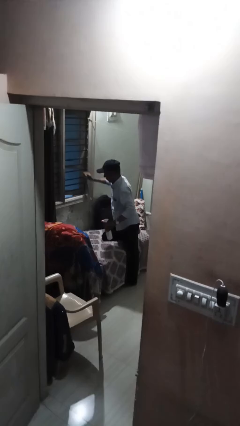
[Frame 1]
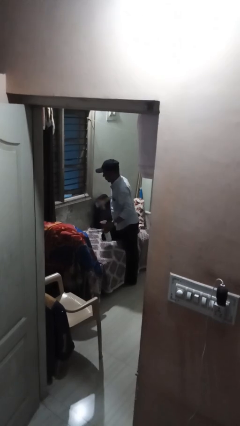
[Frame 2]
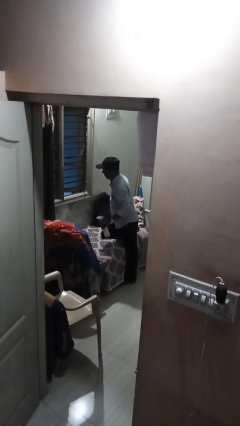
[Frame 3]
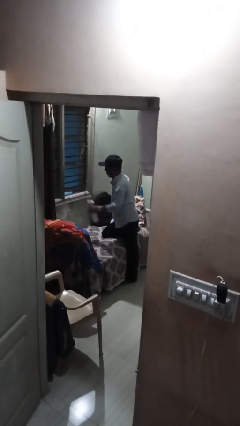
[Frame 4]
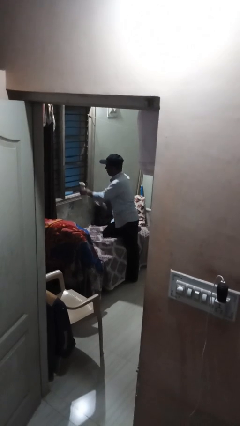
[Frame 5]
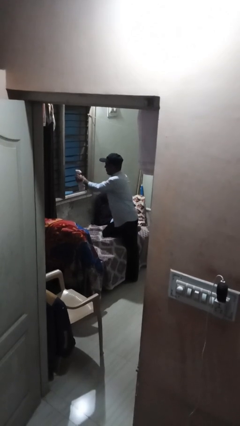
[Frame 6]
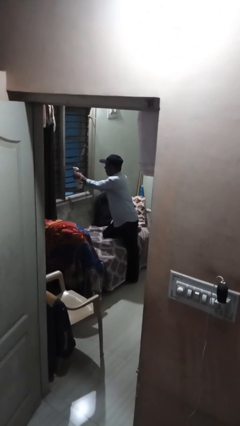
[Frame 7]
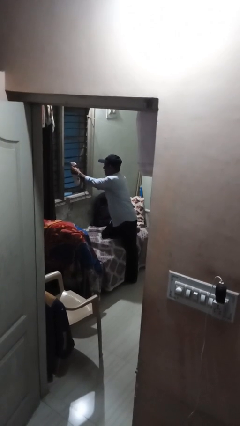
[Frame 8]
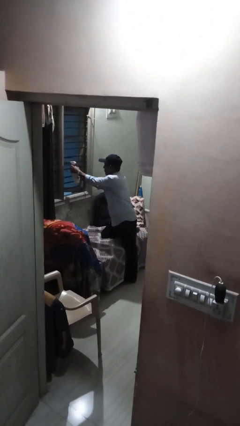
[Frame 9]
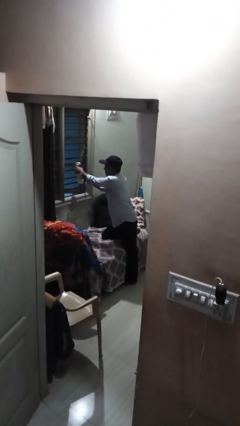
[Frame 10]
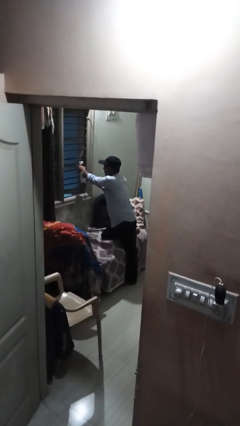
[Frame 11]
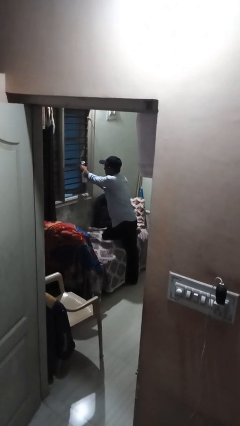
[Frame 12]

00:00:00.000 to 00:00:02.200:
person sprays from bottle

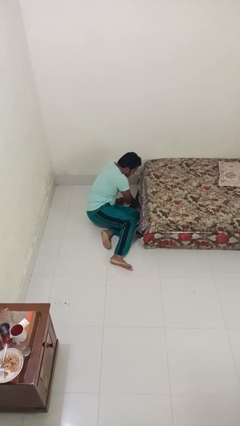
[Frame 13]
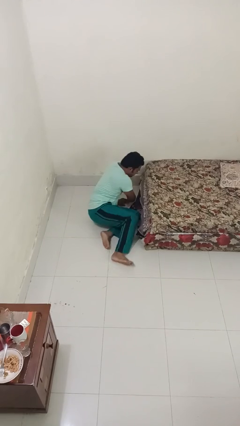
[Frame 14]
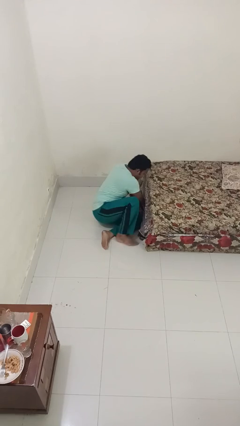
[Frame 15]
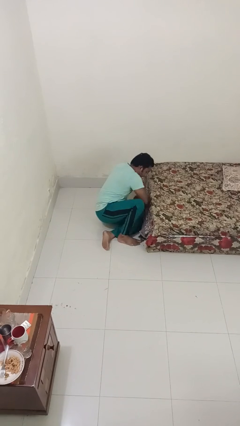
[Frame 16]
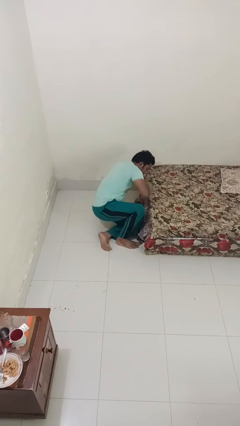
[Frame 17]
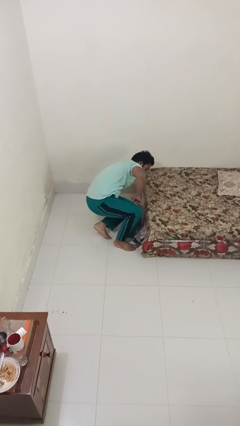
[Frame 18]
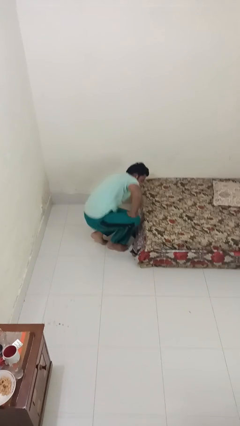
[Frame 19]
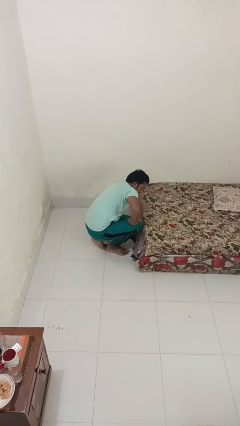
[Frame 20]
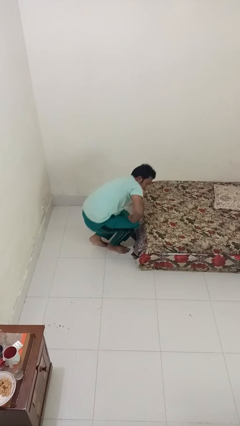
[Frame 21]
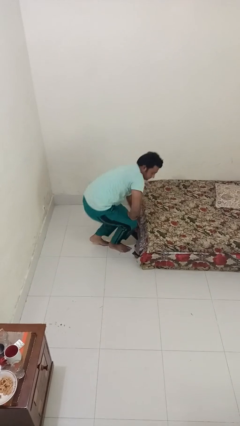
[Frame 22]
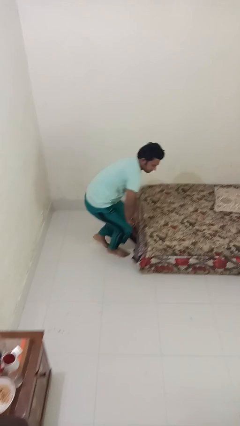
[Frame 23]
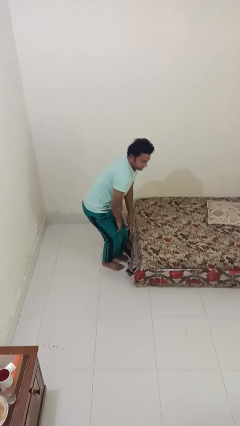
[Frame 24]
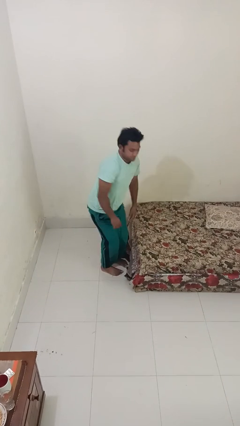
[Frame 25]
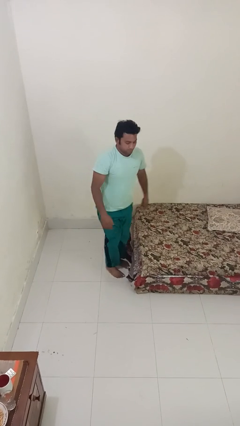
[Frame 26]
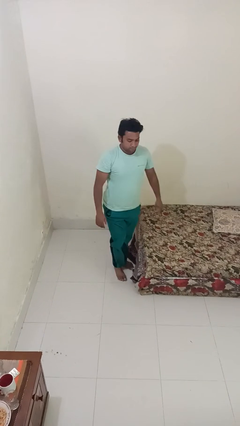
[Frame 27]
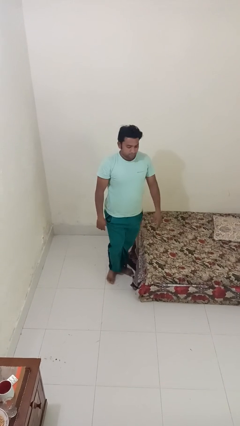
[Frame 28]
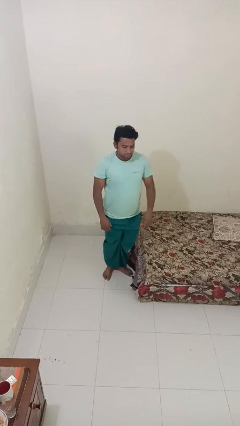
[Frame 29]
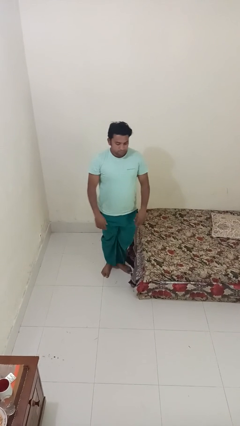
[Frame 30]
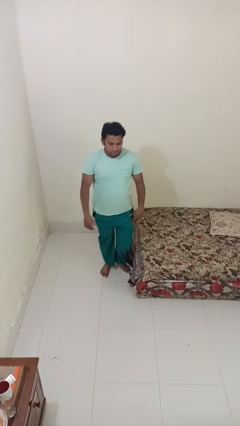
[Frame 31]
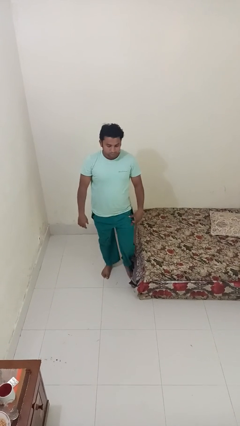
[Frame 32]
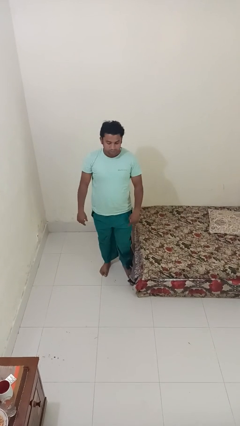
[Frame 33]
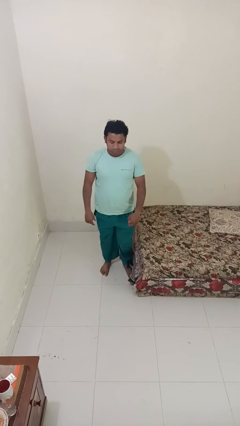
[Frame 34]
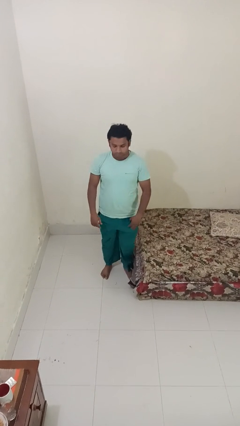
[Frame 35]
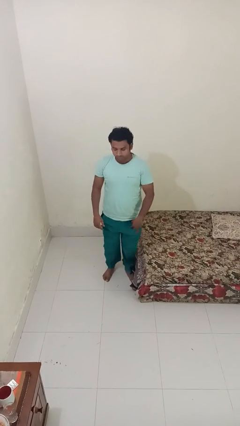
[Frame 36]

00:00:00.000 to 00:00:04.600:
person stands up from floor

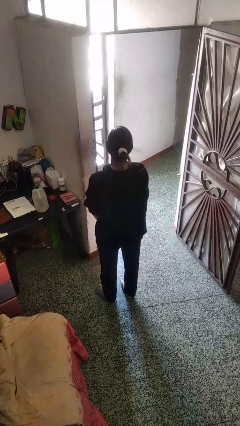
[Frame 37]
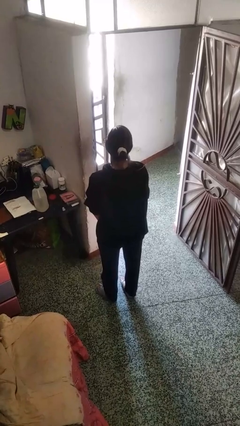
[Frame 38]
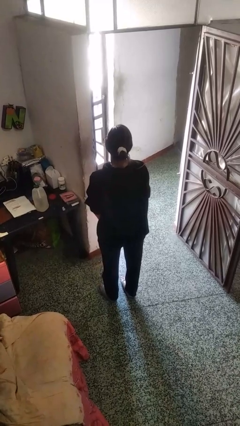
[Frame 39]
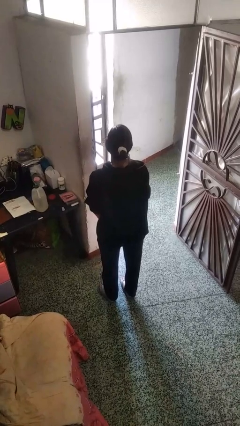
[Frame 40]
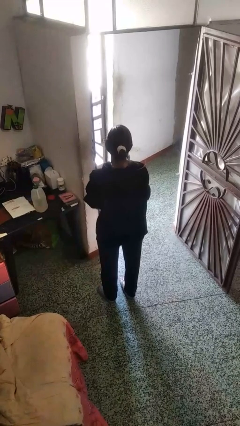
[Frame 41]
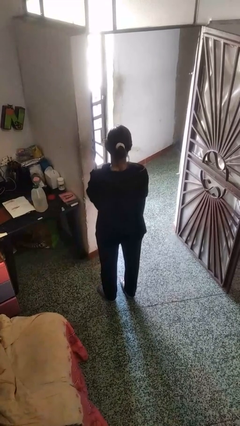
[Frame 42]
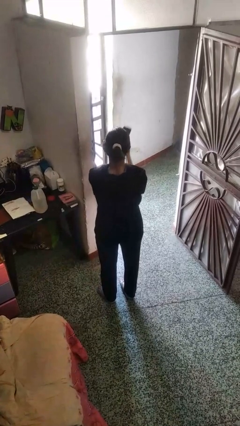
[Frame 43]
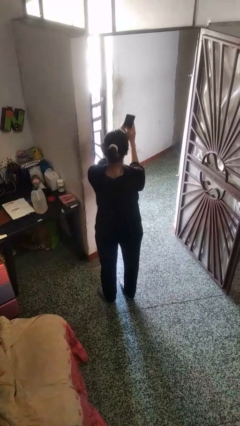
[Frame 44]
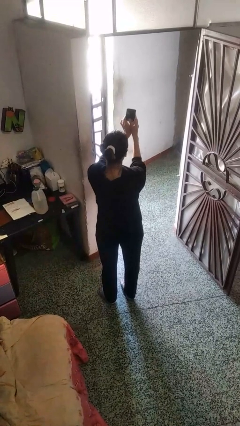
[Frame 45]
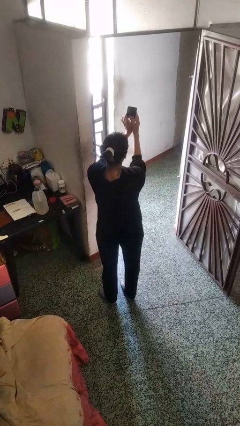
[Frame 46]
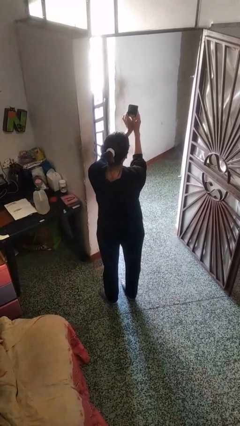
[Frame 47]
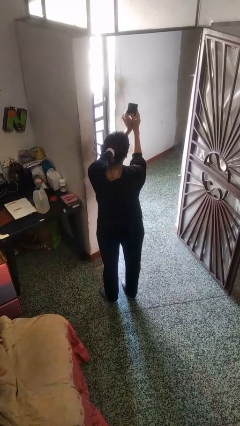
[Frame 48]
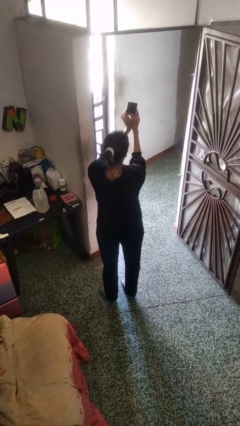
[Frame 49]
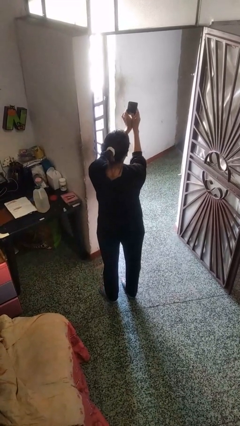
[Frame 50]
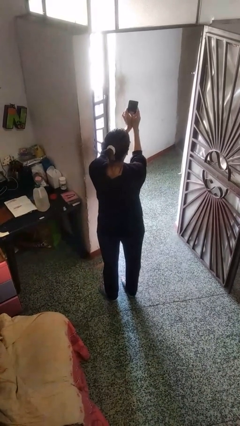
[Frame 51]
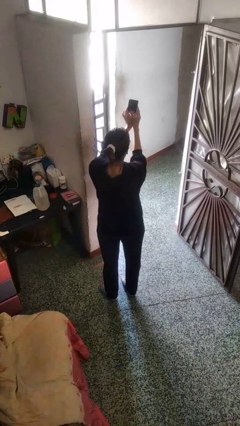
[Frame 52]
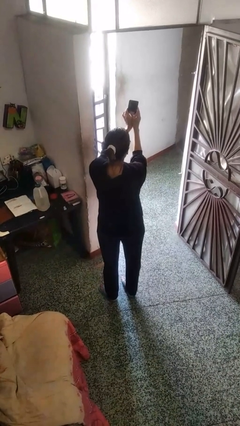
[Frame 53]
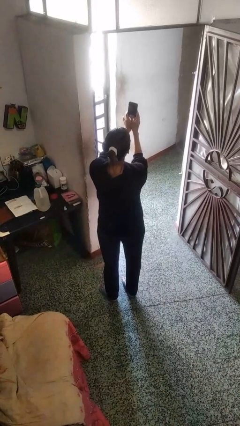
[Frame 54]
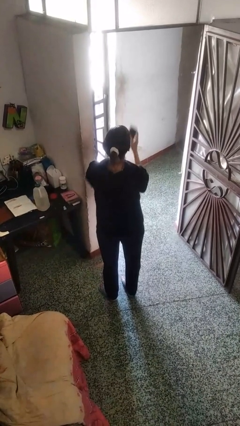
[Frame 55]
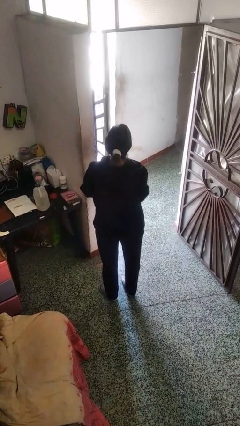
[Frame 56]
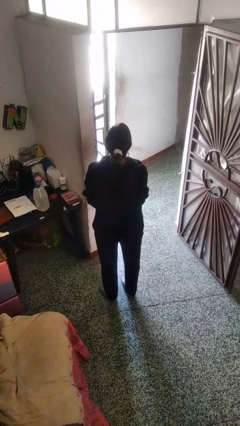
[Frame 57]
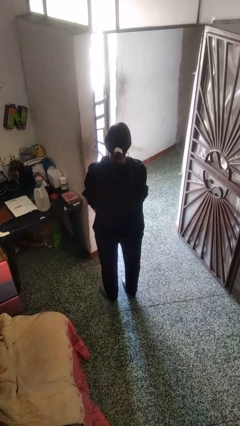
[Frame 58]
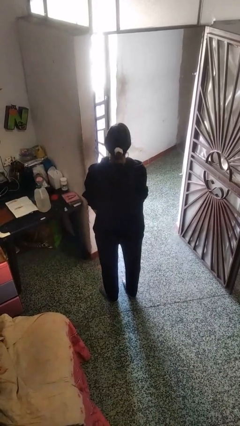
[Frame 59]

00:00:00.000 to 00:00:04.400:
person takes selfie

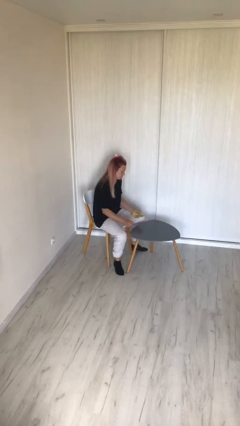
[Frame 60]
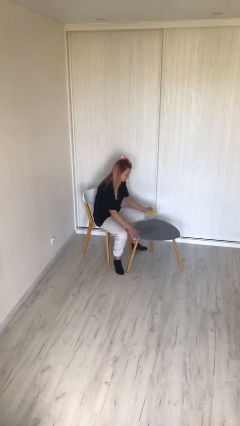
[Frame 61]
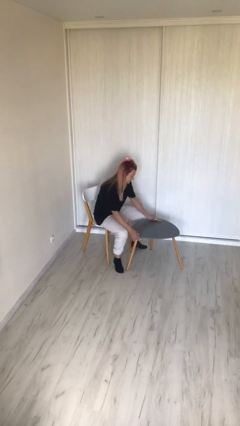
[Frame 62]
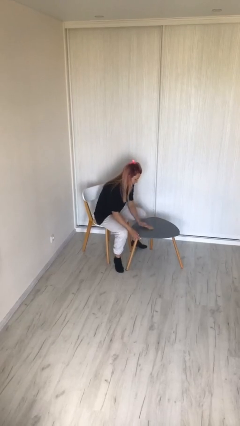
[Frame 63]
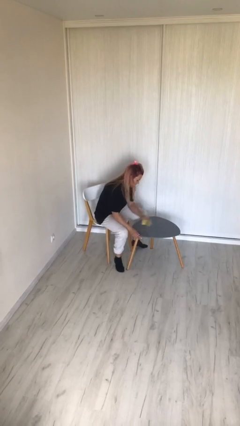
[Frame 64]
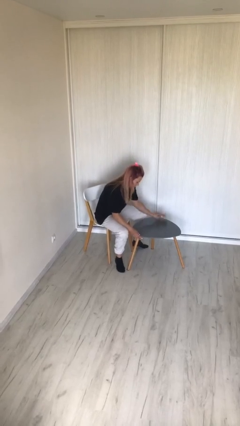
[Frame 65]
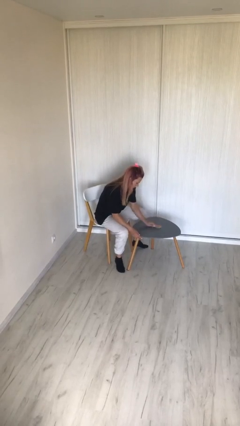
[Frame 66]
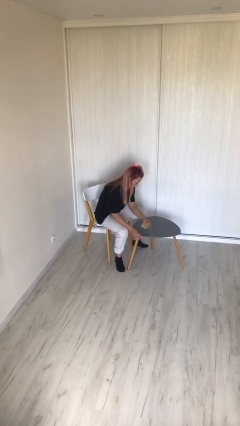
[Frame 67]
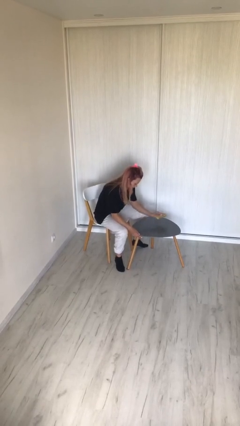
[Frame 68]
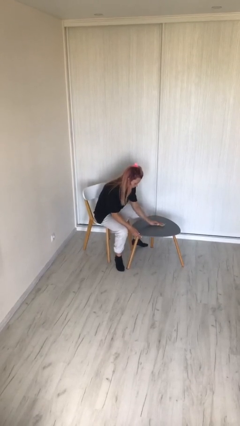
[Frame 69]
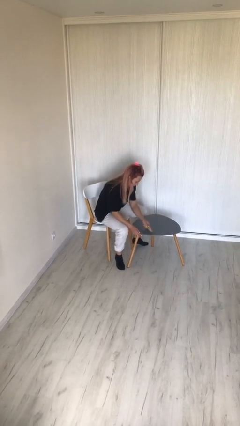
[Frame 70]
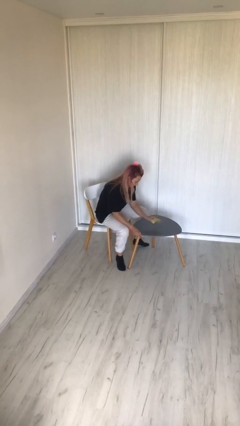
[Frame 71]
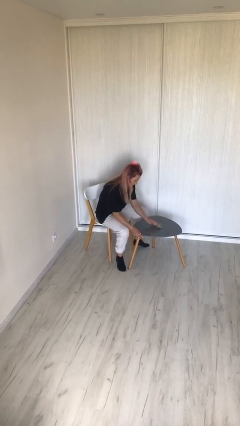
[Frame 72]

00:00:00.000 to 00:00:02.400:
person cleans table with rag

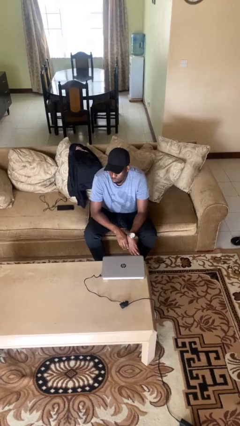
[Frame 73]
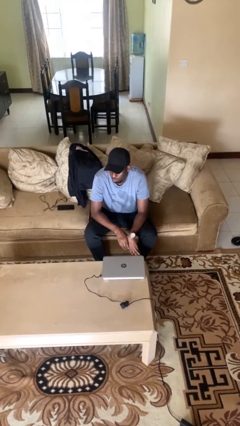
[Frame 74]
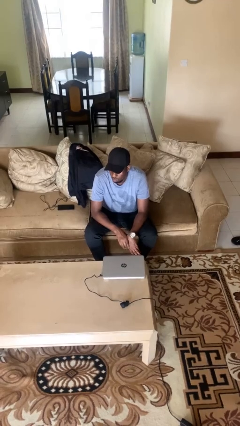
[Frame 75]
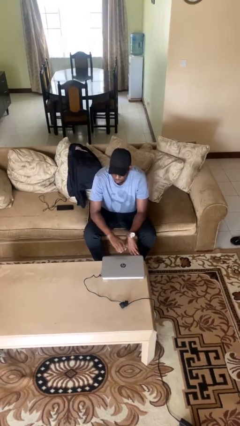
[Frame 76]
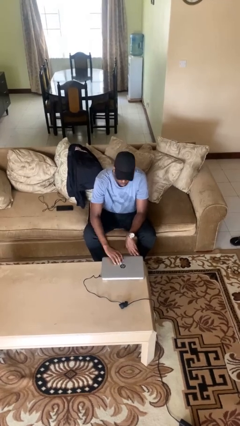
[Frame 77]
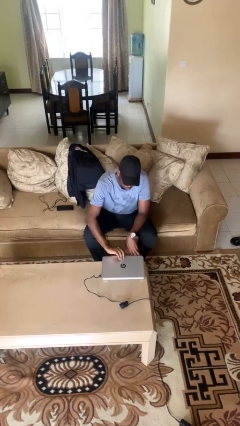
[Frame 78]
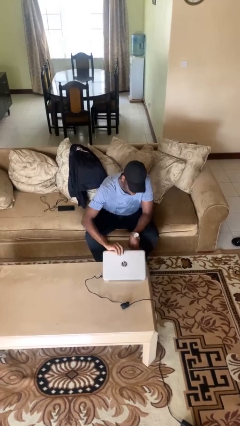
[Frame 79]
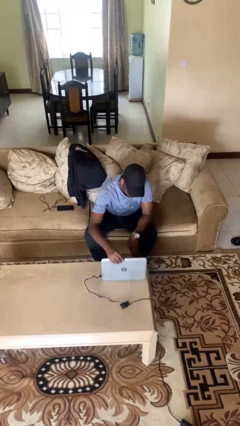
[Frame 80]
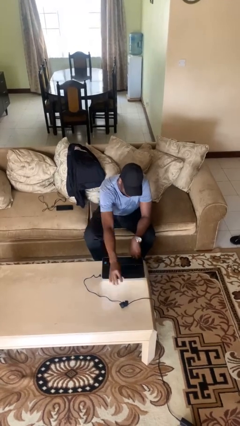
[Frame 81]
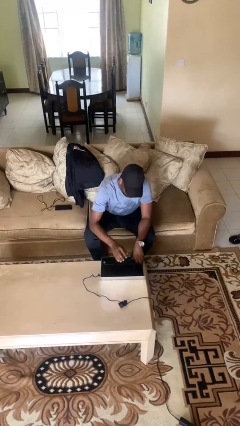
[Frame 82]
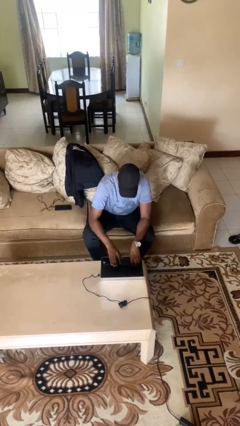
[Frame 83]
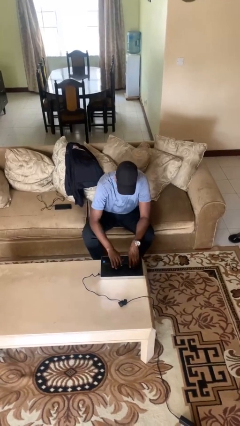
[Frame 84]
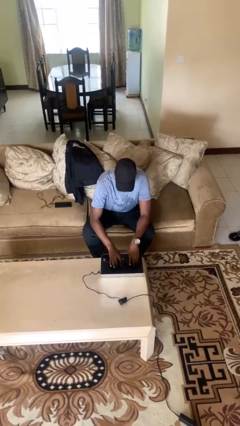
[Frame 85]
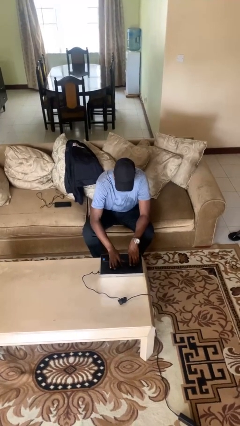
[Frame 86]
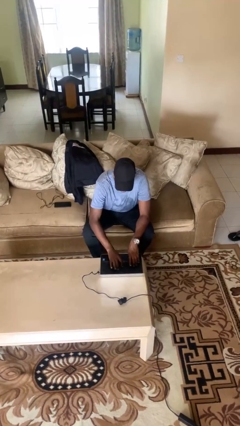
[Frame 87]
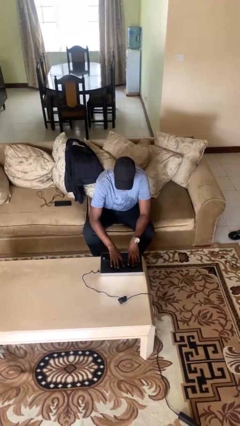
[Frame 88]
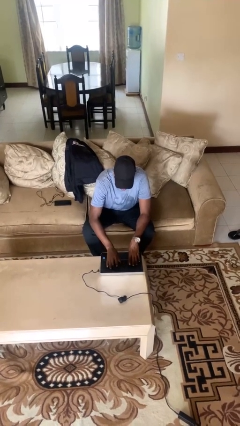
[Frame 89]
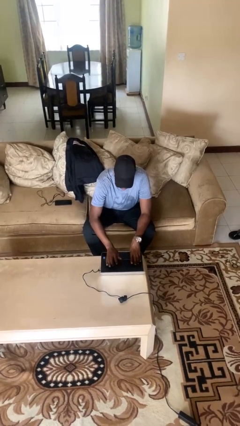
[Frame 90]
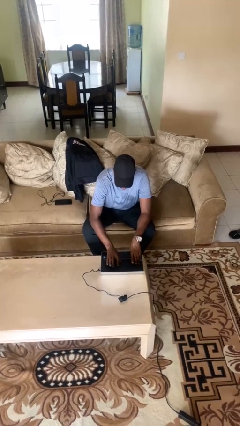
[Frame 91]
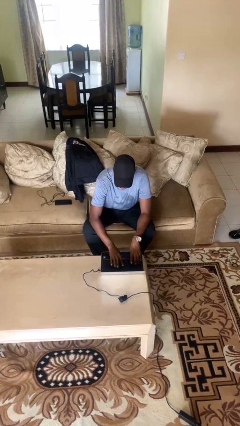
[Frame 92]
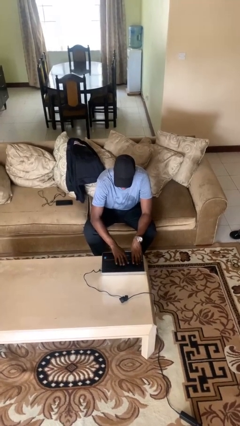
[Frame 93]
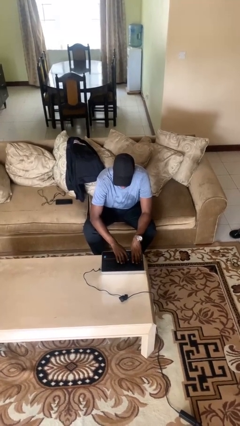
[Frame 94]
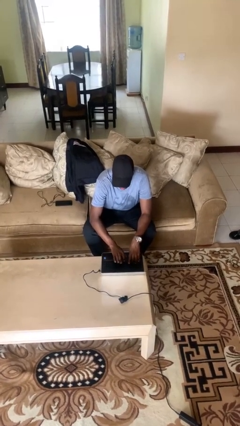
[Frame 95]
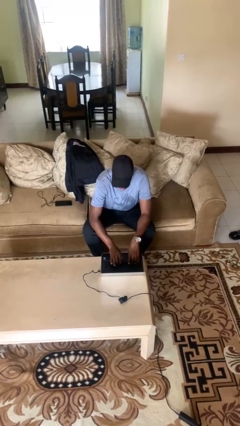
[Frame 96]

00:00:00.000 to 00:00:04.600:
person interacts with laptop
